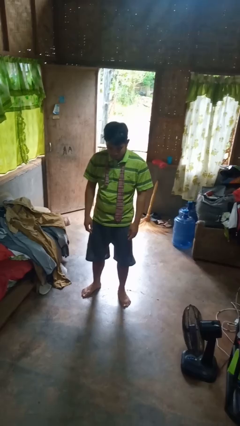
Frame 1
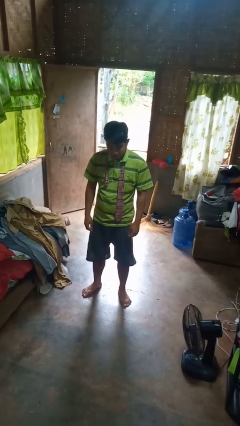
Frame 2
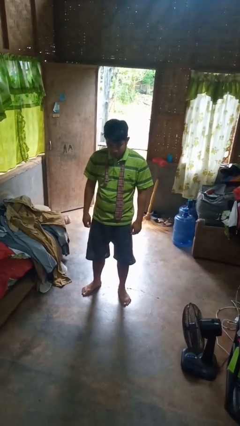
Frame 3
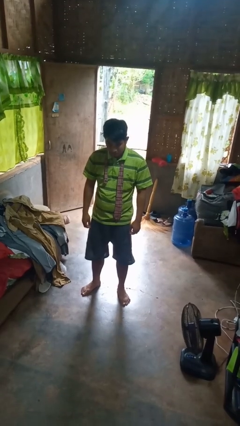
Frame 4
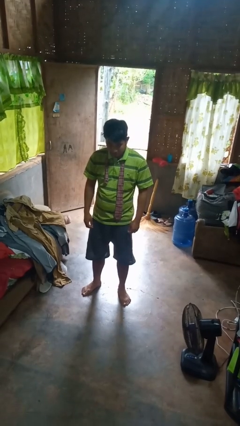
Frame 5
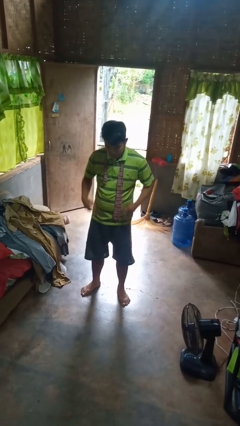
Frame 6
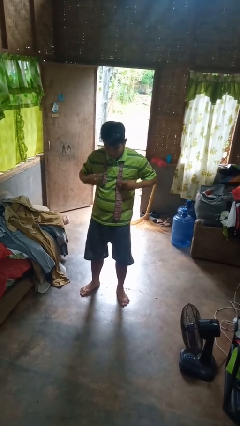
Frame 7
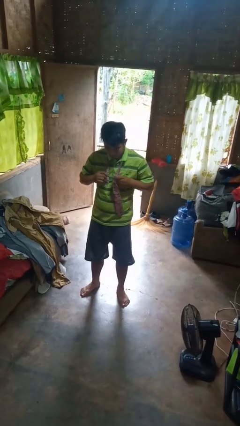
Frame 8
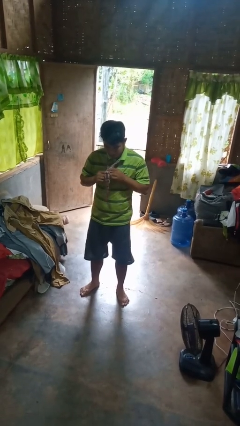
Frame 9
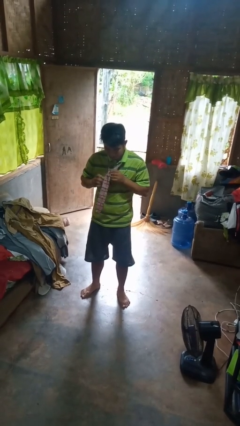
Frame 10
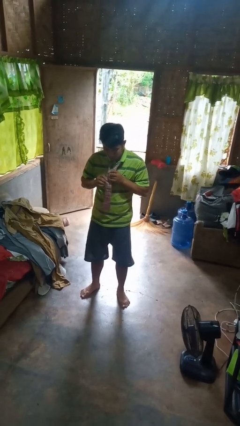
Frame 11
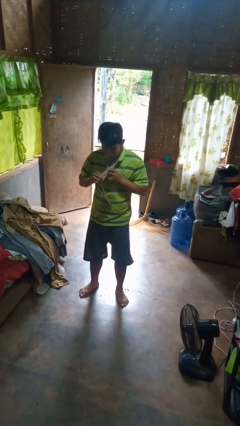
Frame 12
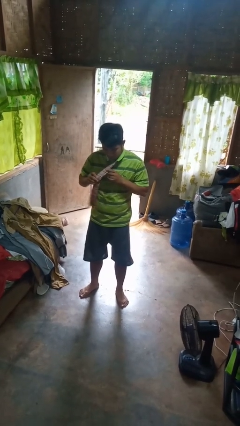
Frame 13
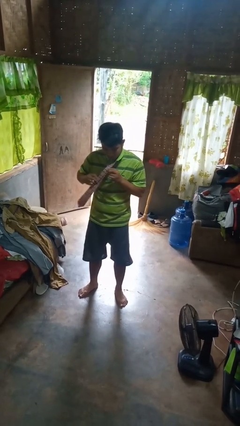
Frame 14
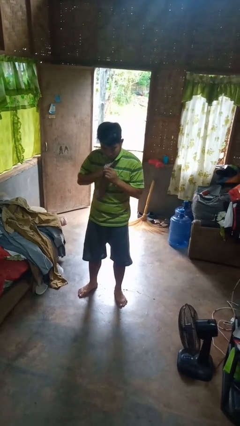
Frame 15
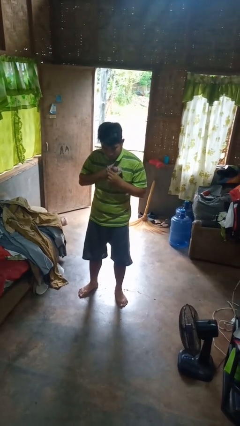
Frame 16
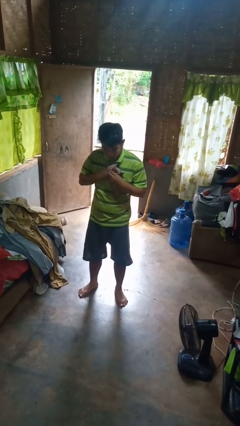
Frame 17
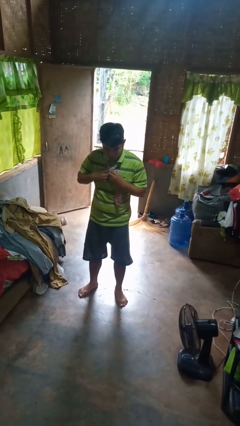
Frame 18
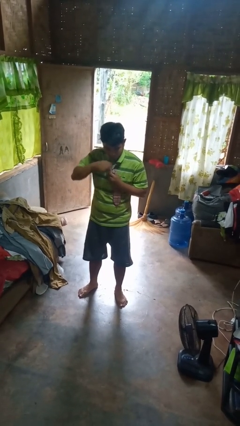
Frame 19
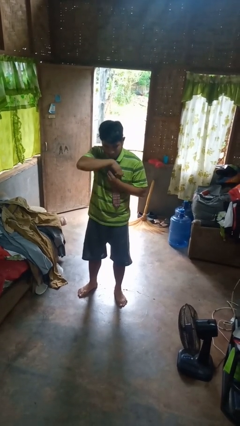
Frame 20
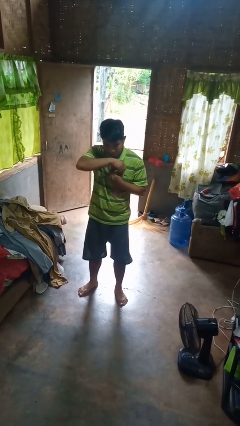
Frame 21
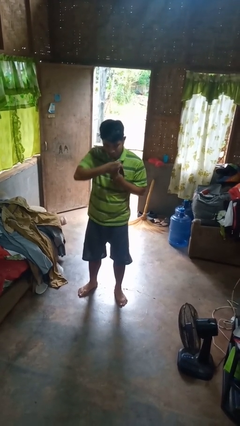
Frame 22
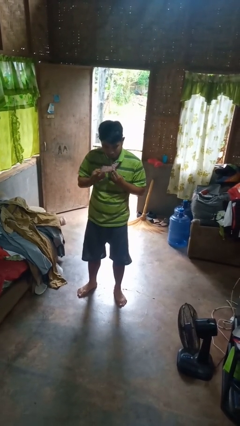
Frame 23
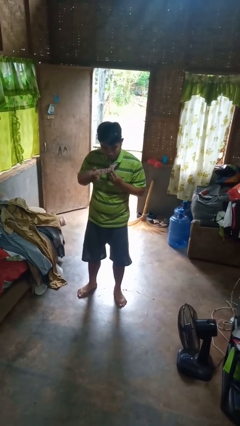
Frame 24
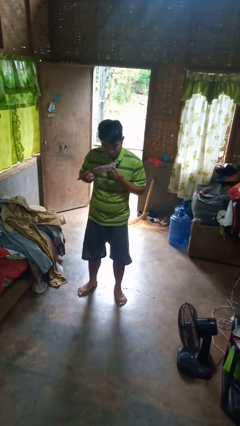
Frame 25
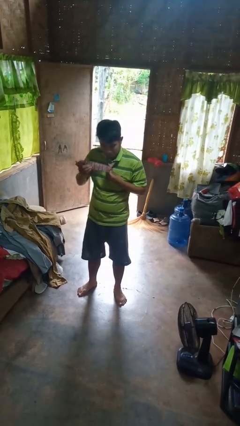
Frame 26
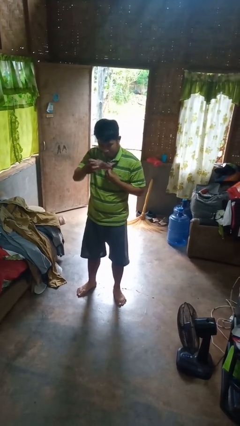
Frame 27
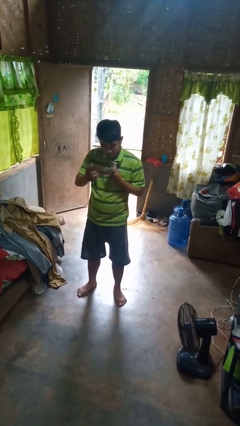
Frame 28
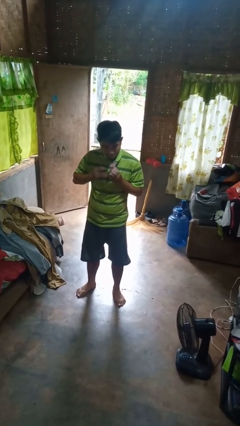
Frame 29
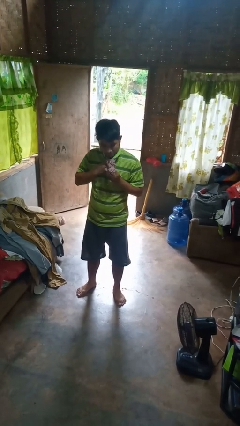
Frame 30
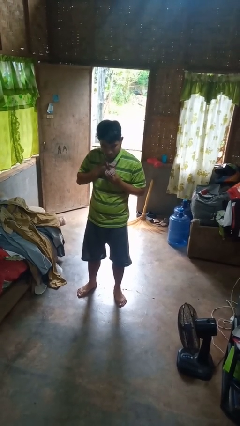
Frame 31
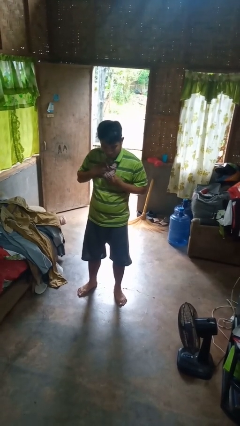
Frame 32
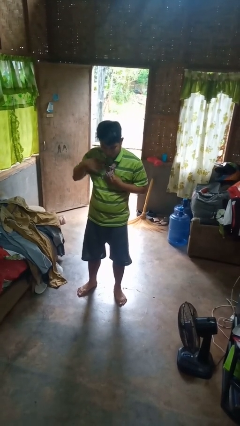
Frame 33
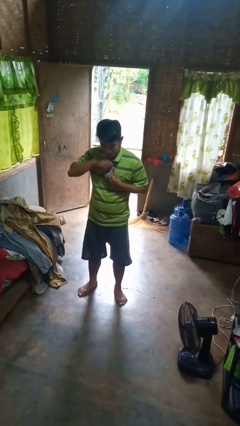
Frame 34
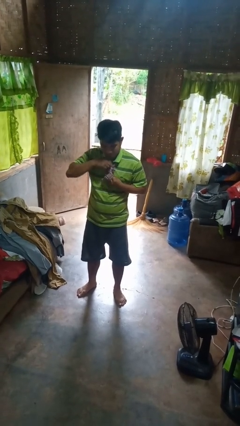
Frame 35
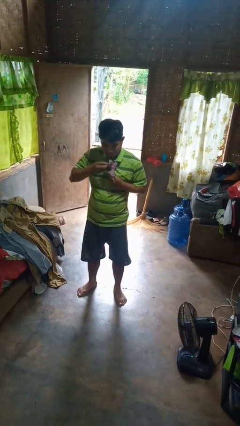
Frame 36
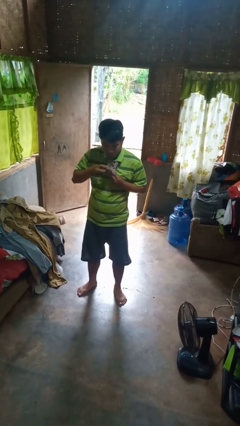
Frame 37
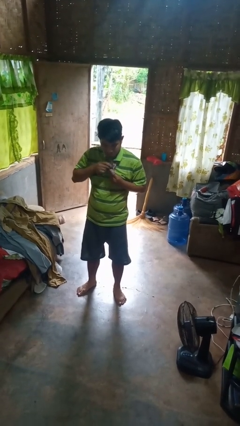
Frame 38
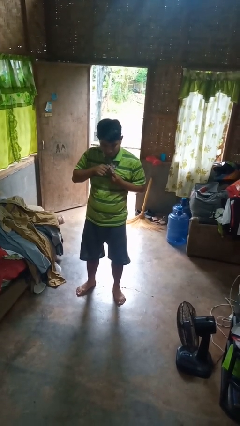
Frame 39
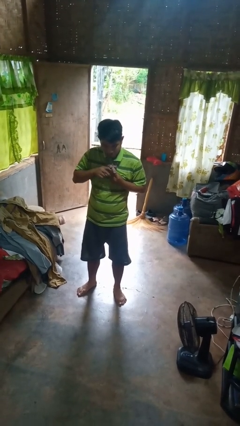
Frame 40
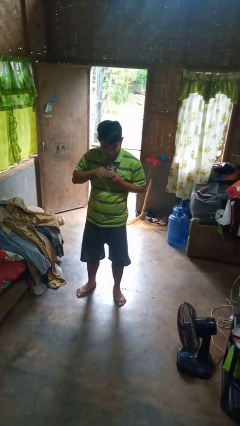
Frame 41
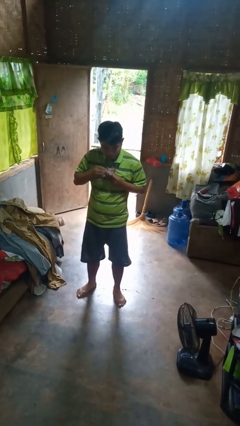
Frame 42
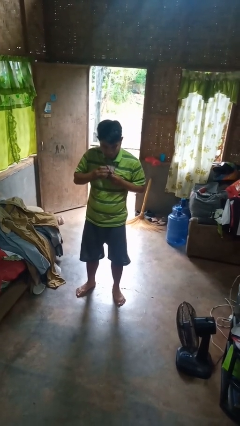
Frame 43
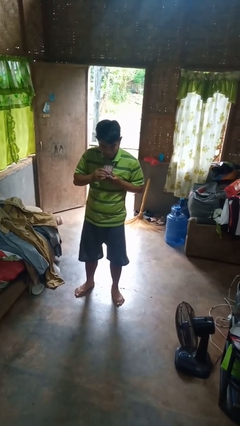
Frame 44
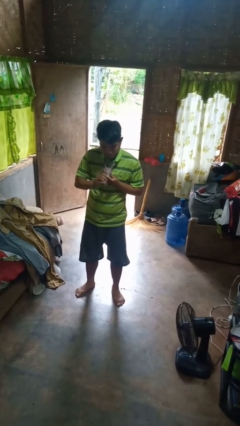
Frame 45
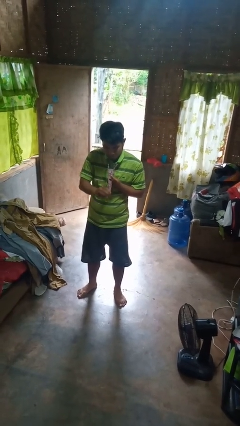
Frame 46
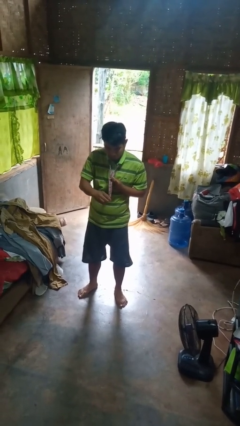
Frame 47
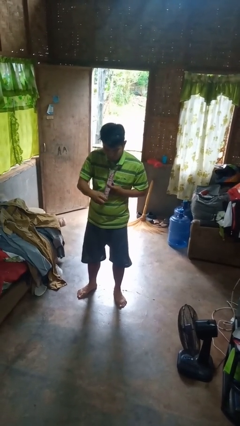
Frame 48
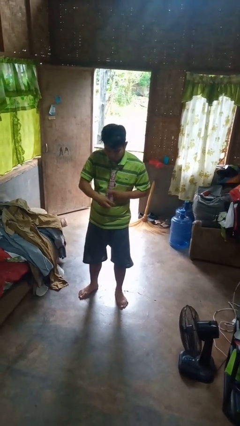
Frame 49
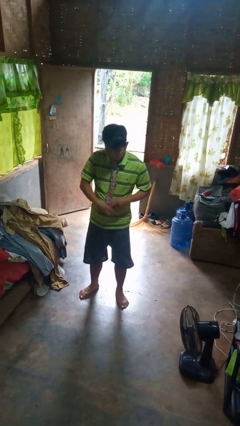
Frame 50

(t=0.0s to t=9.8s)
person puts on necktie

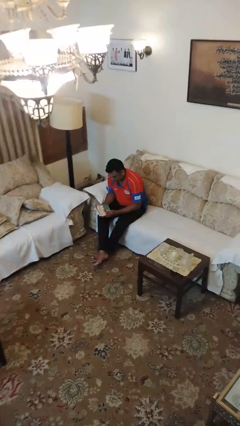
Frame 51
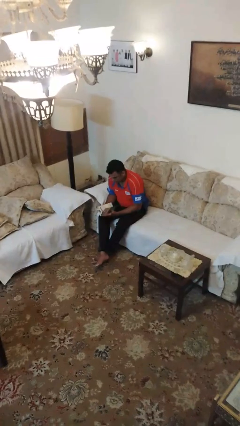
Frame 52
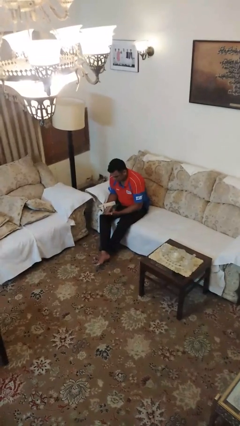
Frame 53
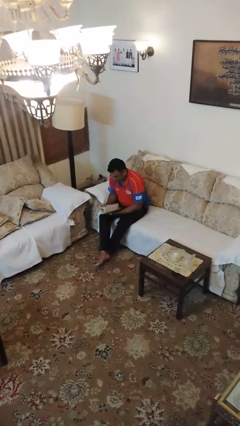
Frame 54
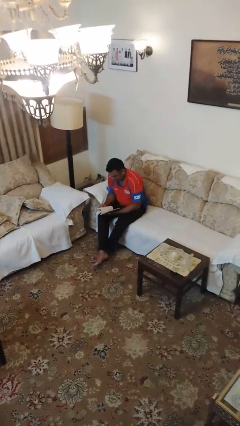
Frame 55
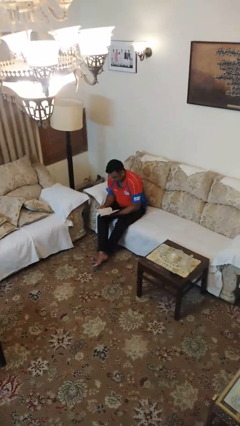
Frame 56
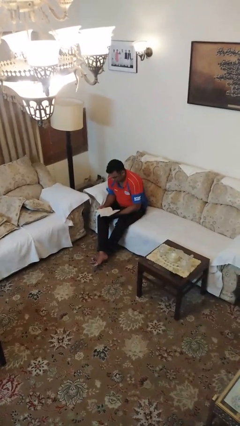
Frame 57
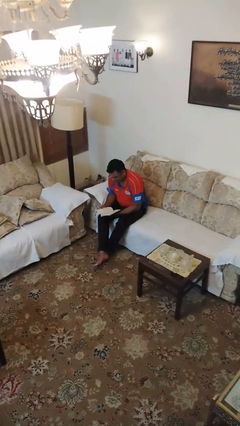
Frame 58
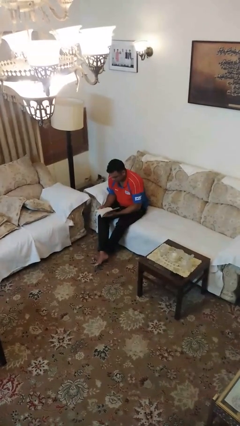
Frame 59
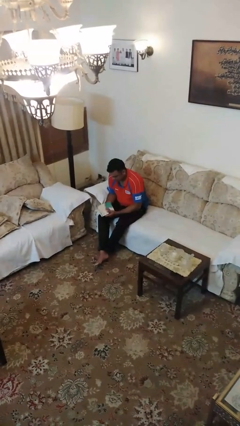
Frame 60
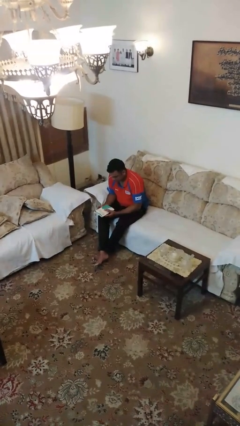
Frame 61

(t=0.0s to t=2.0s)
person reads magazine

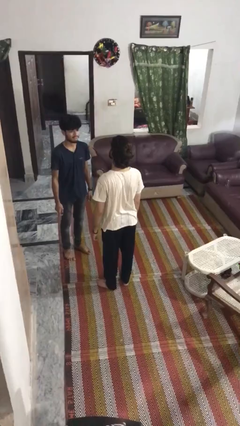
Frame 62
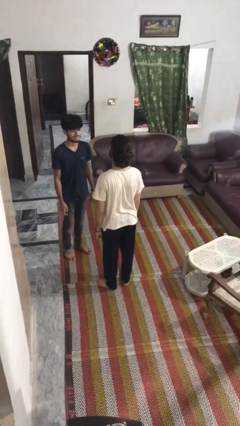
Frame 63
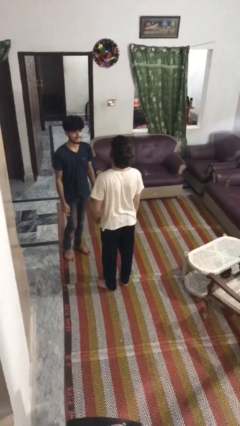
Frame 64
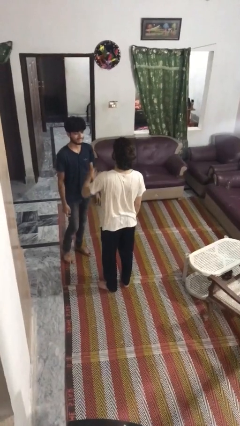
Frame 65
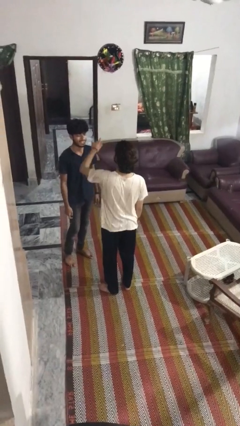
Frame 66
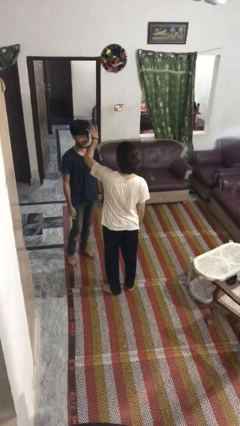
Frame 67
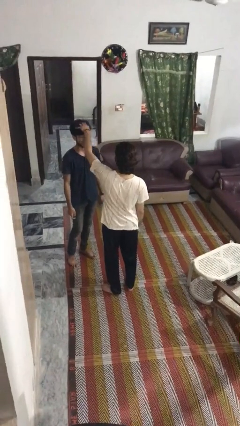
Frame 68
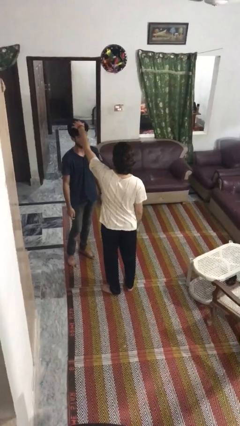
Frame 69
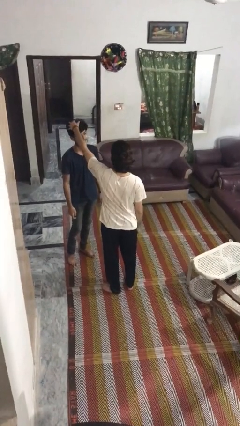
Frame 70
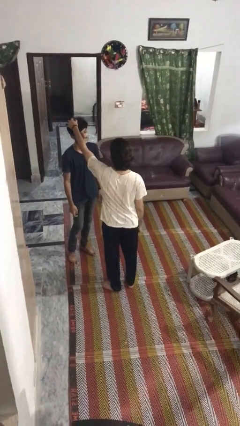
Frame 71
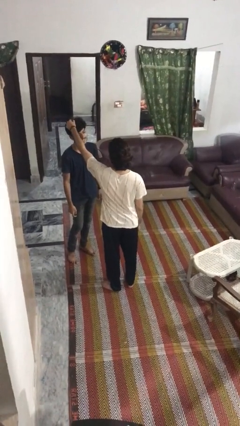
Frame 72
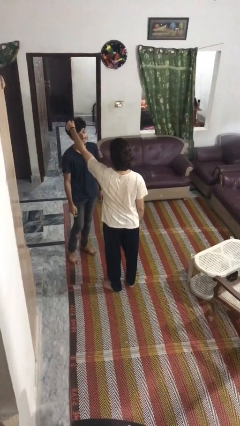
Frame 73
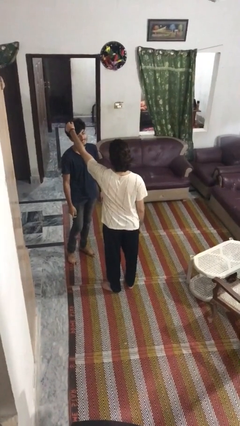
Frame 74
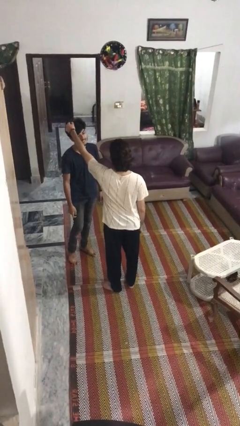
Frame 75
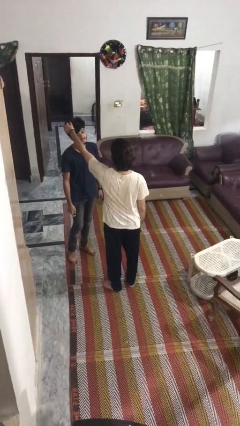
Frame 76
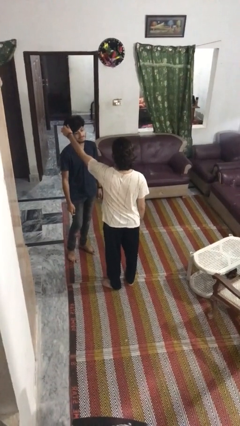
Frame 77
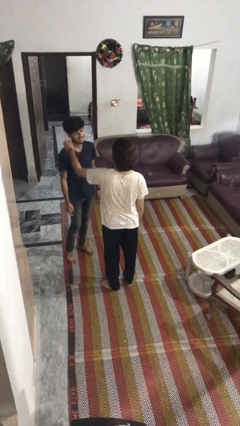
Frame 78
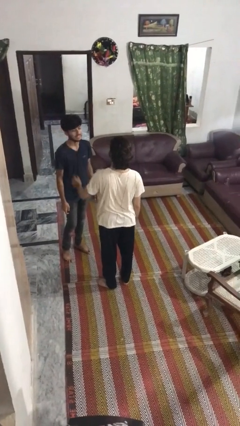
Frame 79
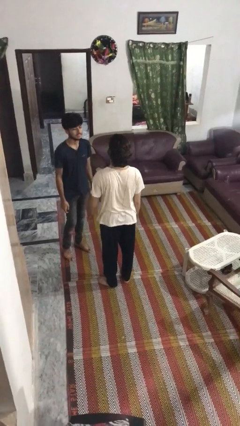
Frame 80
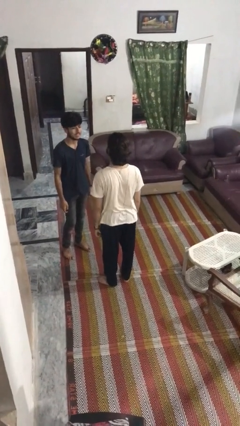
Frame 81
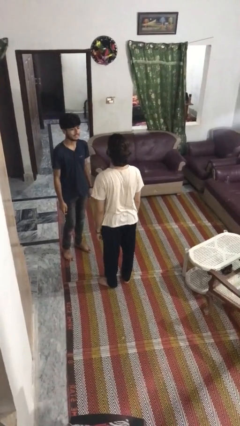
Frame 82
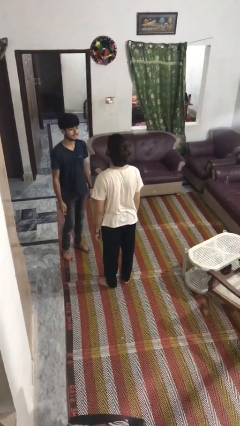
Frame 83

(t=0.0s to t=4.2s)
person grabs person by hair

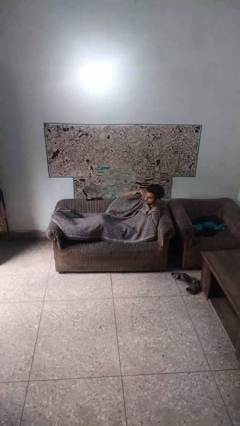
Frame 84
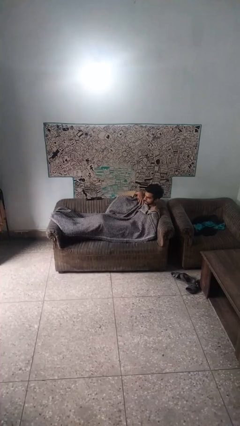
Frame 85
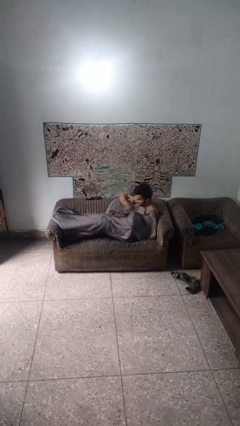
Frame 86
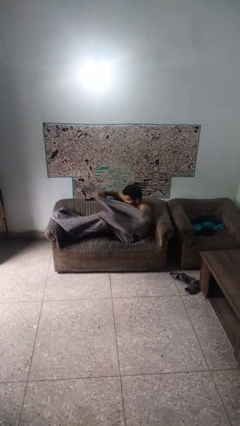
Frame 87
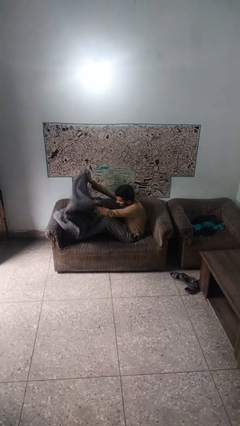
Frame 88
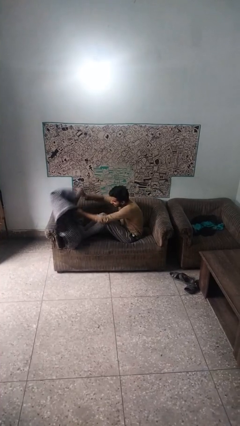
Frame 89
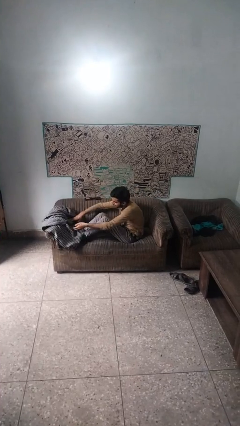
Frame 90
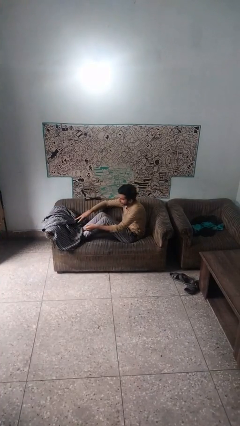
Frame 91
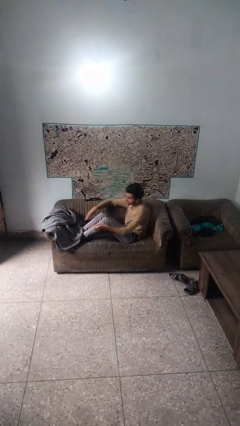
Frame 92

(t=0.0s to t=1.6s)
person uncovers with blanket

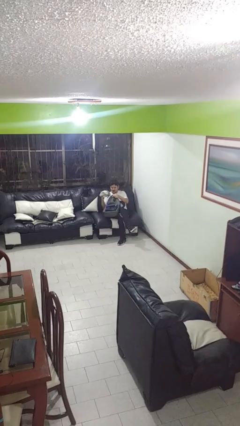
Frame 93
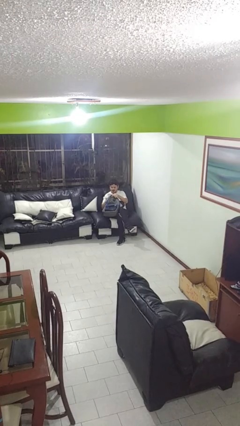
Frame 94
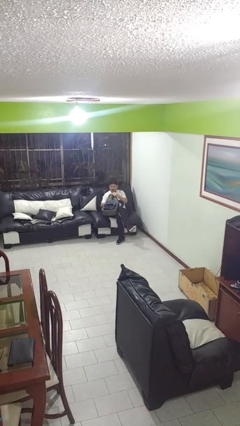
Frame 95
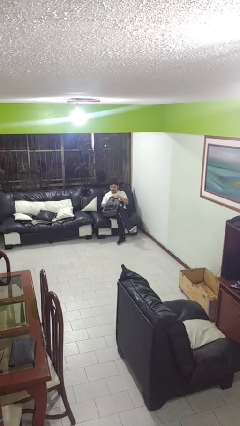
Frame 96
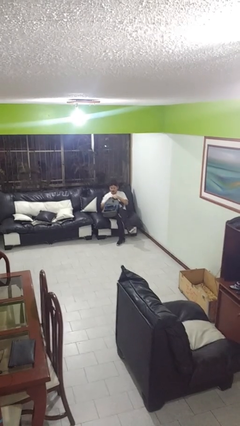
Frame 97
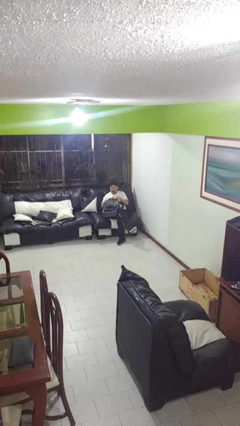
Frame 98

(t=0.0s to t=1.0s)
person puts object into backpack
